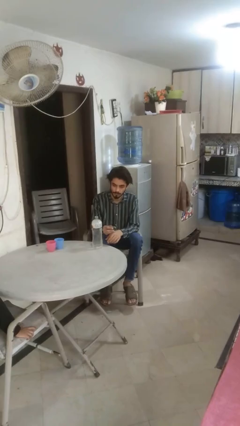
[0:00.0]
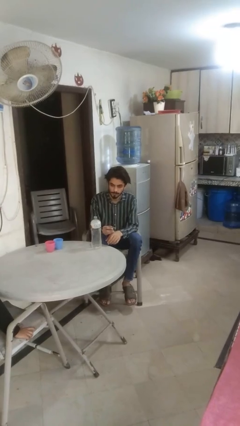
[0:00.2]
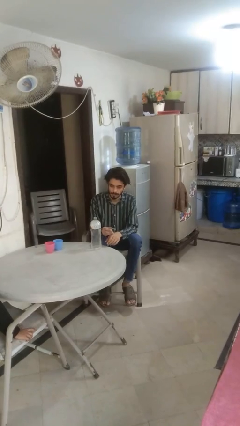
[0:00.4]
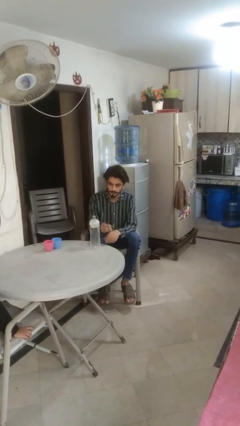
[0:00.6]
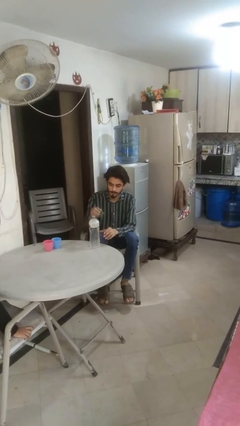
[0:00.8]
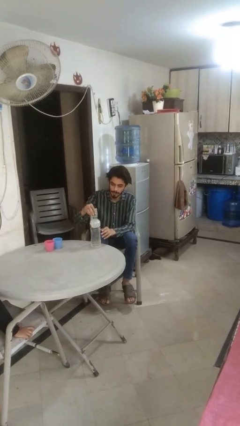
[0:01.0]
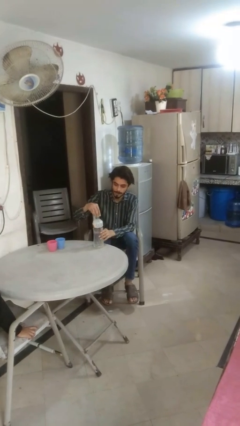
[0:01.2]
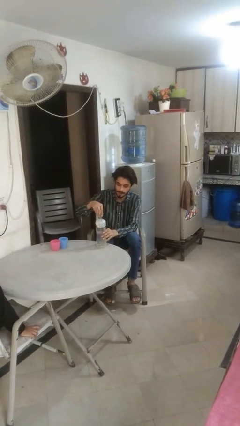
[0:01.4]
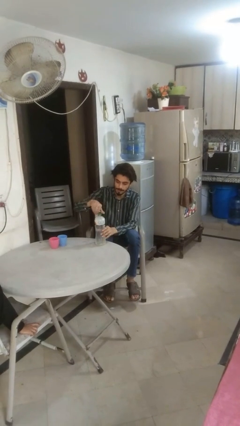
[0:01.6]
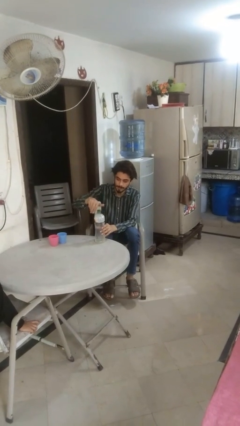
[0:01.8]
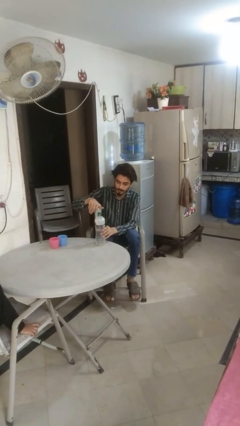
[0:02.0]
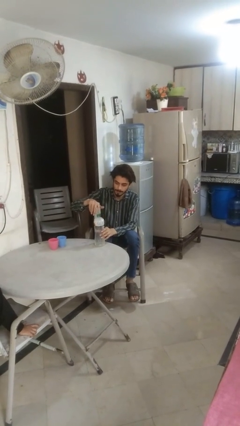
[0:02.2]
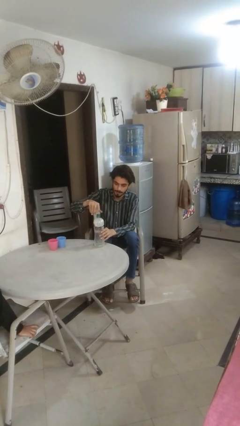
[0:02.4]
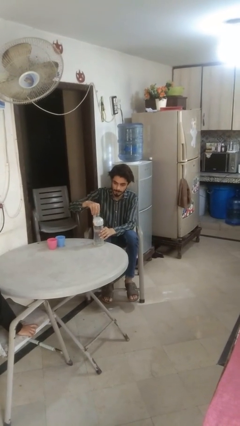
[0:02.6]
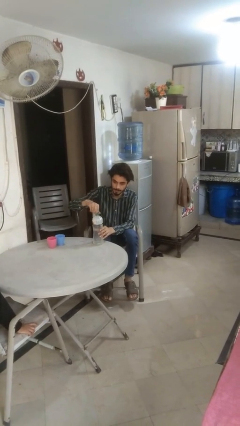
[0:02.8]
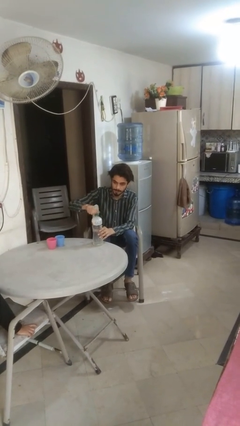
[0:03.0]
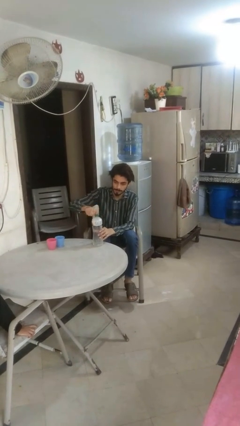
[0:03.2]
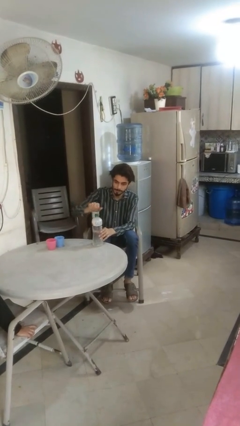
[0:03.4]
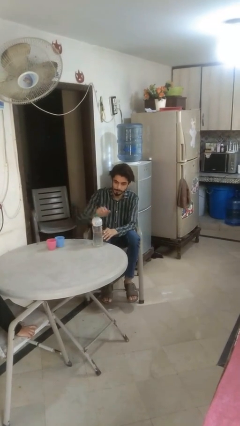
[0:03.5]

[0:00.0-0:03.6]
person screws lid to bottle

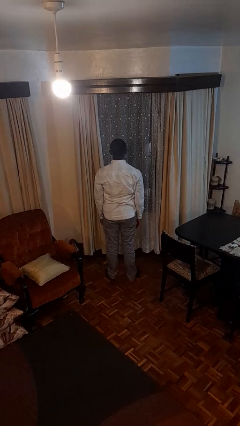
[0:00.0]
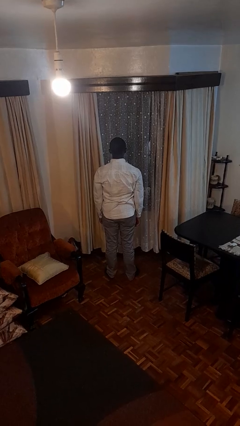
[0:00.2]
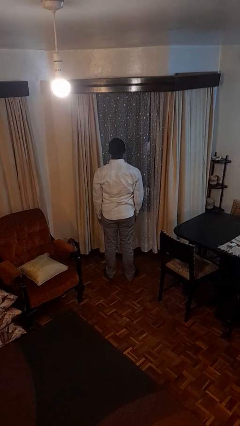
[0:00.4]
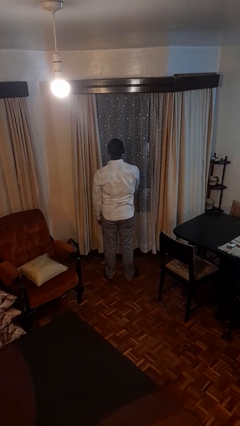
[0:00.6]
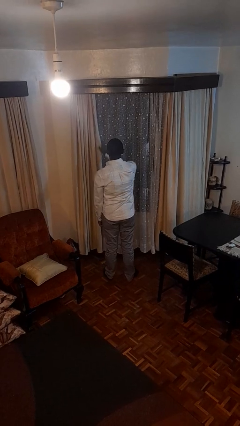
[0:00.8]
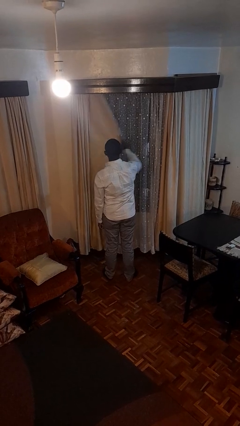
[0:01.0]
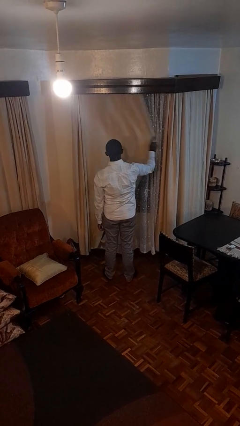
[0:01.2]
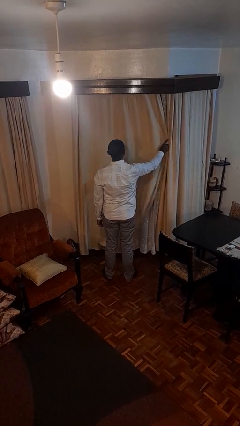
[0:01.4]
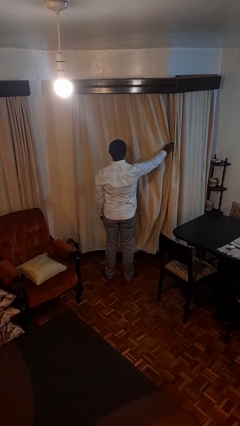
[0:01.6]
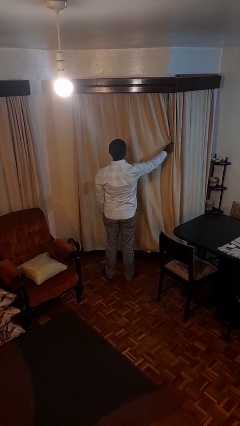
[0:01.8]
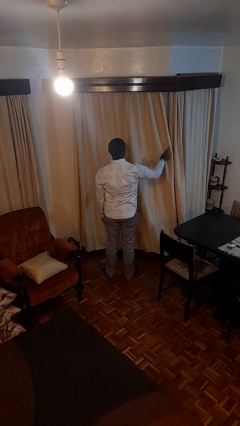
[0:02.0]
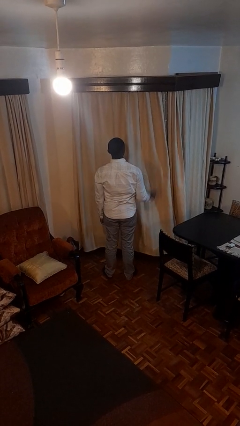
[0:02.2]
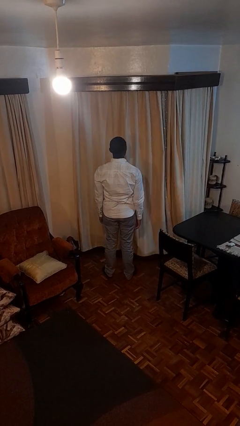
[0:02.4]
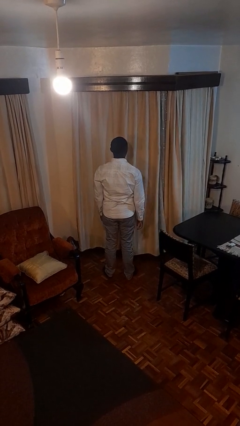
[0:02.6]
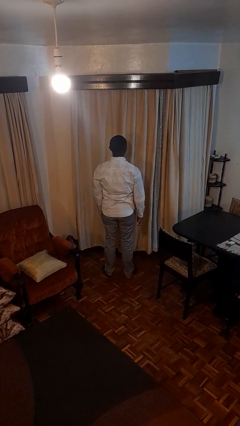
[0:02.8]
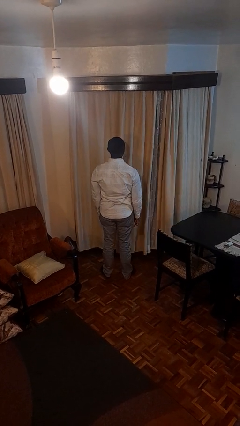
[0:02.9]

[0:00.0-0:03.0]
person closes curtains

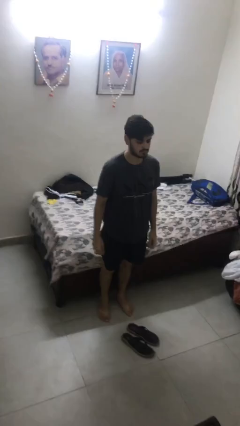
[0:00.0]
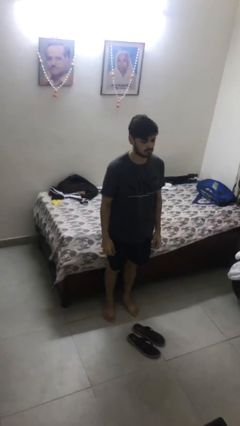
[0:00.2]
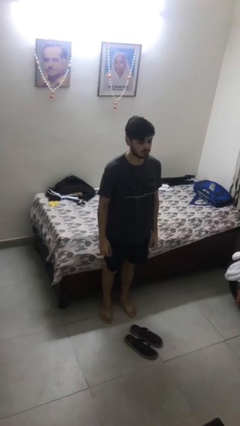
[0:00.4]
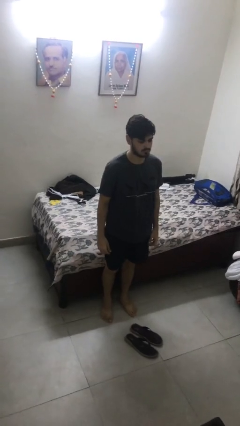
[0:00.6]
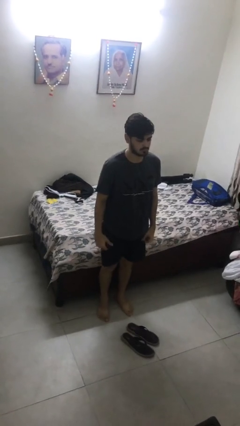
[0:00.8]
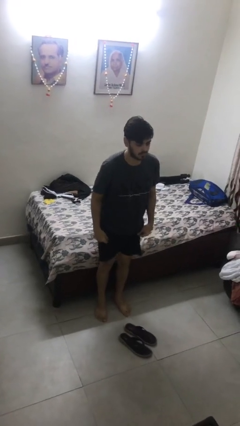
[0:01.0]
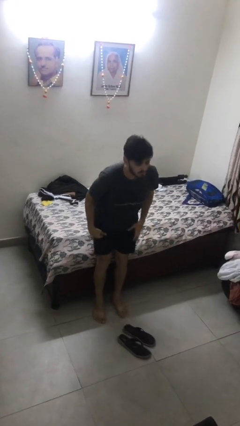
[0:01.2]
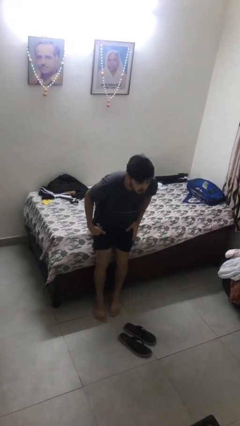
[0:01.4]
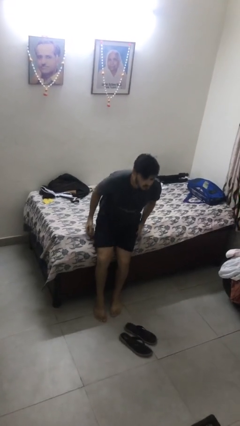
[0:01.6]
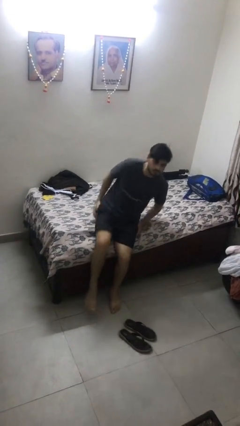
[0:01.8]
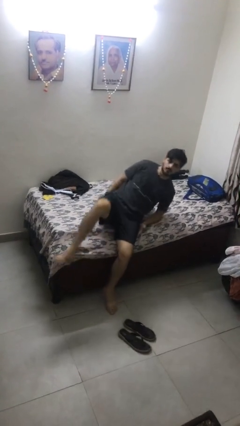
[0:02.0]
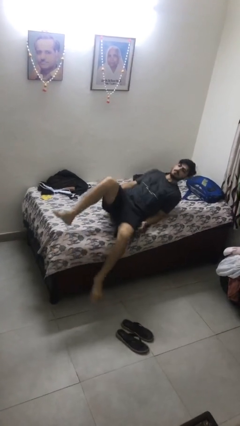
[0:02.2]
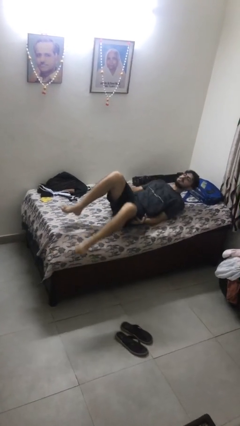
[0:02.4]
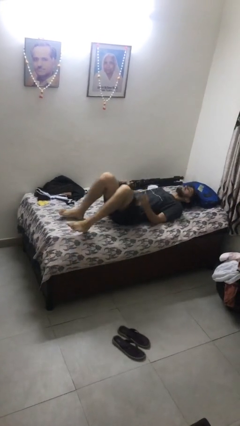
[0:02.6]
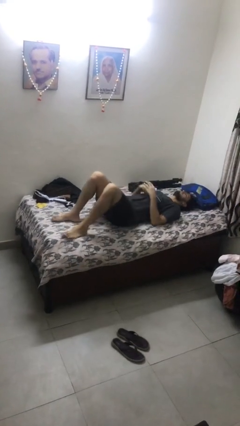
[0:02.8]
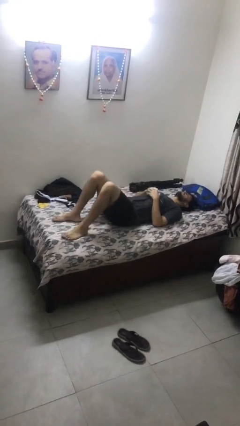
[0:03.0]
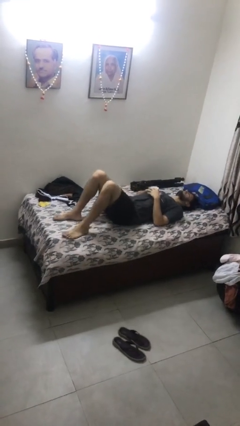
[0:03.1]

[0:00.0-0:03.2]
person lies down on bed

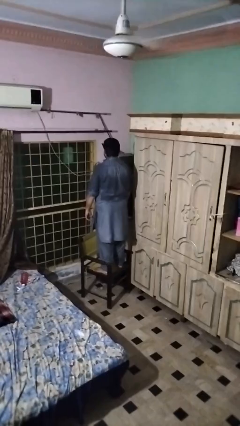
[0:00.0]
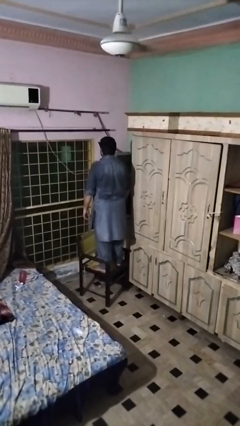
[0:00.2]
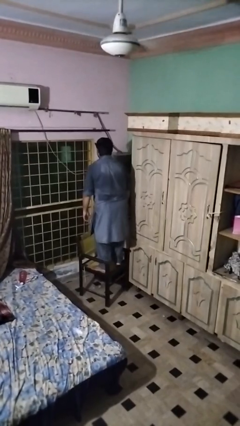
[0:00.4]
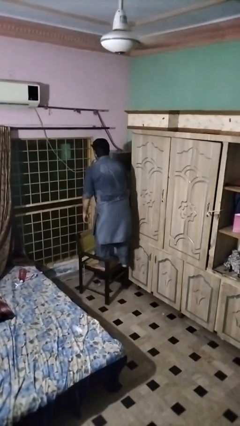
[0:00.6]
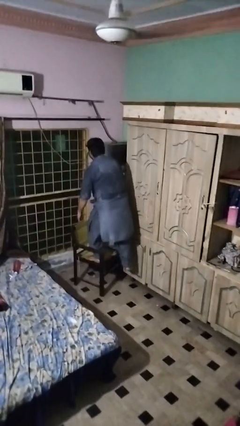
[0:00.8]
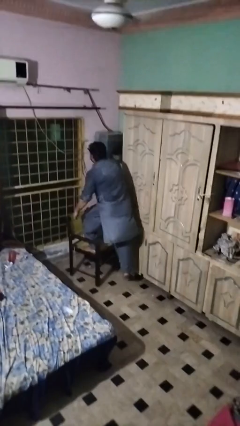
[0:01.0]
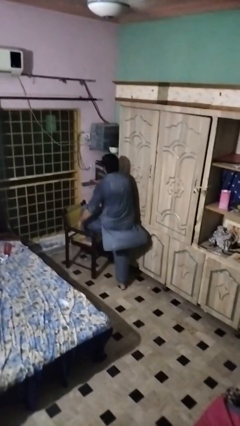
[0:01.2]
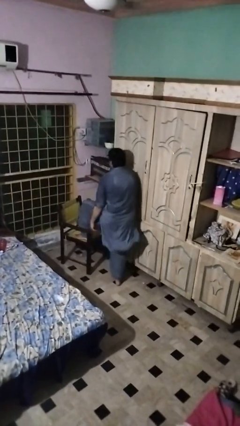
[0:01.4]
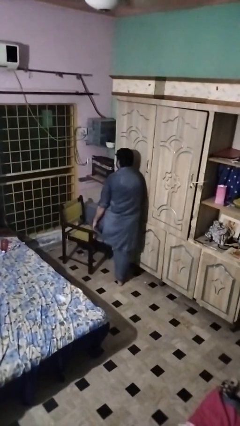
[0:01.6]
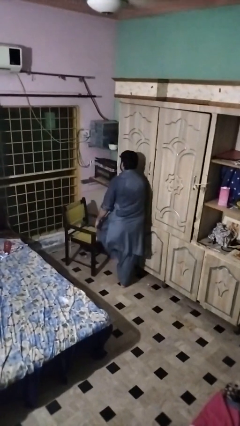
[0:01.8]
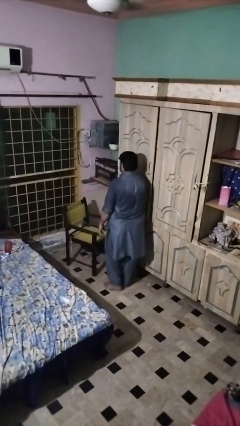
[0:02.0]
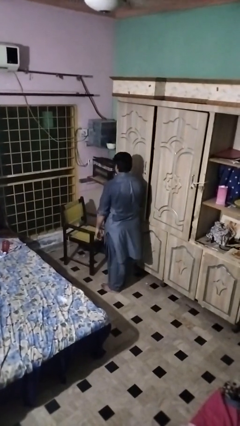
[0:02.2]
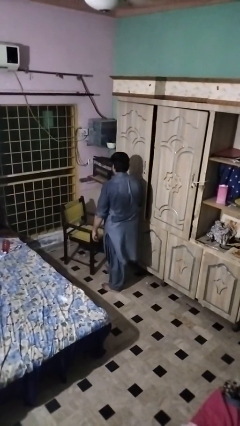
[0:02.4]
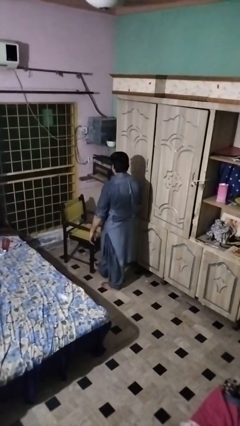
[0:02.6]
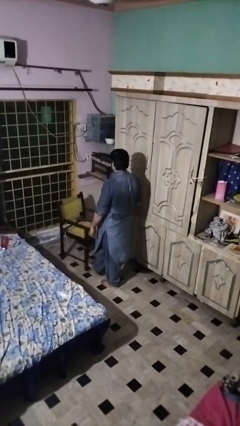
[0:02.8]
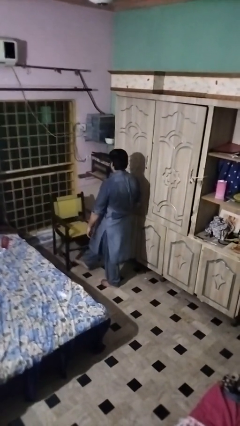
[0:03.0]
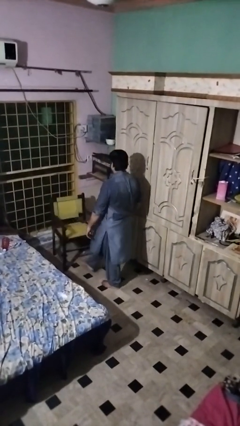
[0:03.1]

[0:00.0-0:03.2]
person climbs off chair

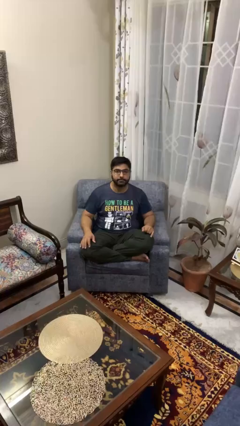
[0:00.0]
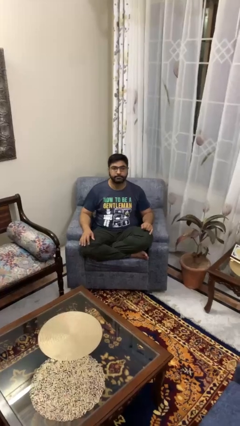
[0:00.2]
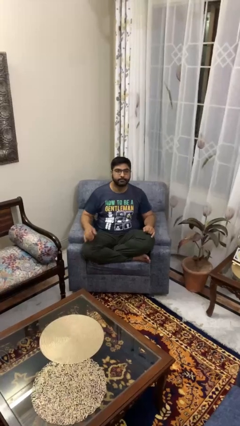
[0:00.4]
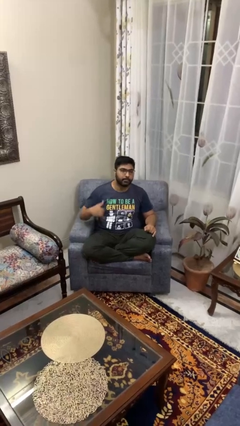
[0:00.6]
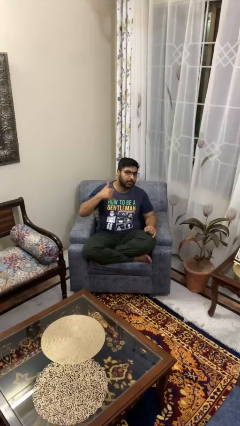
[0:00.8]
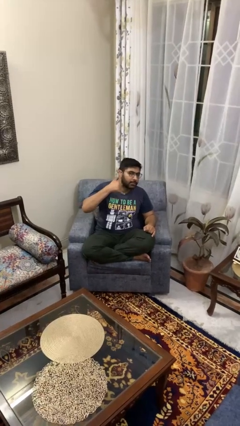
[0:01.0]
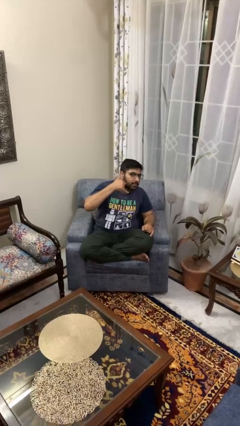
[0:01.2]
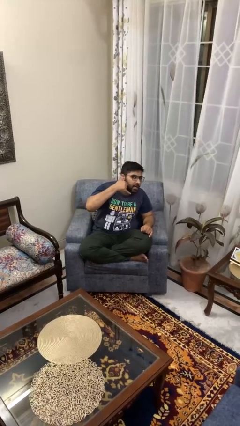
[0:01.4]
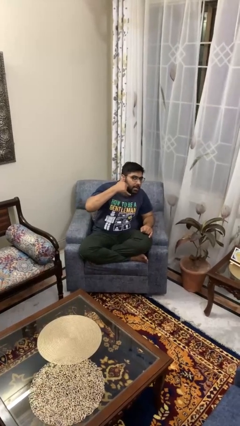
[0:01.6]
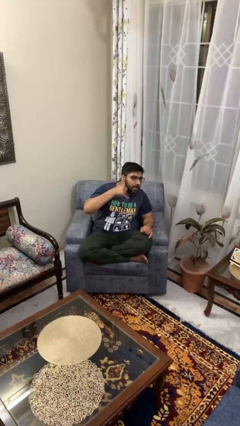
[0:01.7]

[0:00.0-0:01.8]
person gestures call me

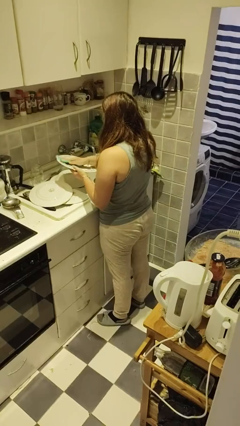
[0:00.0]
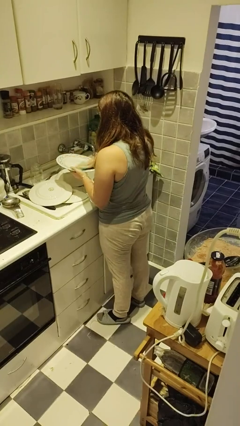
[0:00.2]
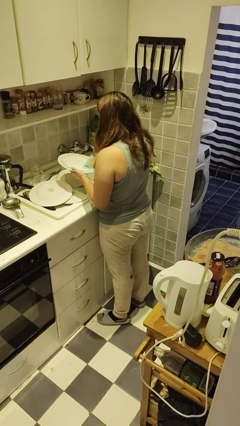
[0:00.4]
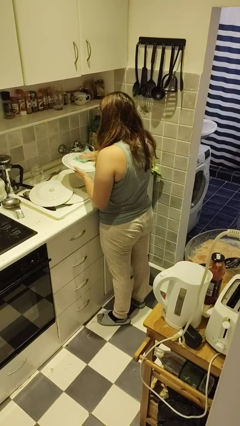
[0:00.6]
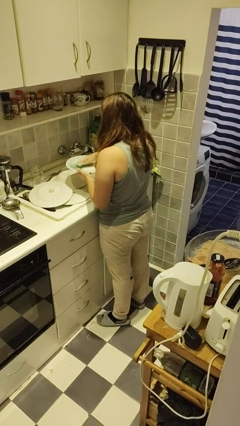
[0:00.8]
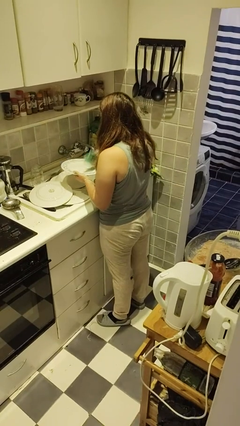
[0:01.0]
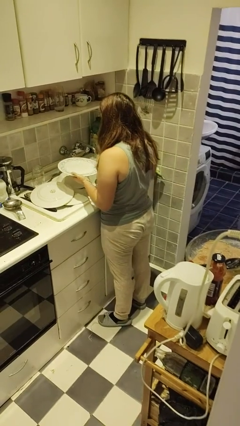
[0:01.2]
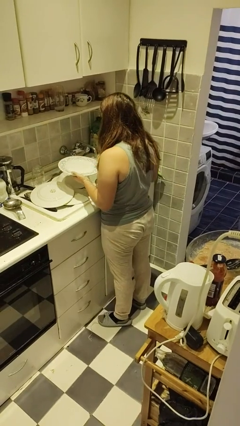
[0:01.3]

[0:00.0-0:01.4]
person dries dish

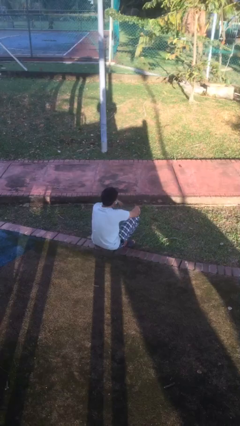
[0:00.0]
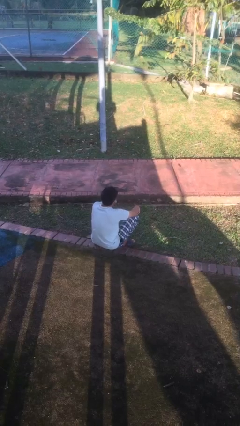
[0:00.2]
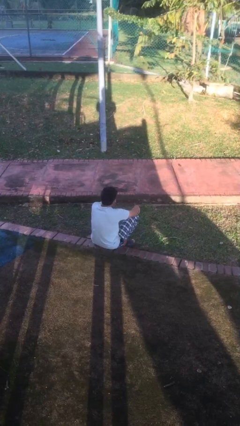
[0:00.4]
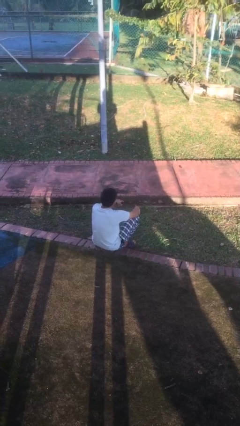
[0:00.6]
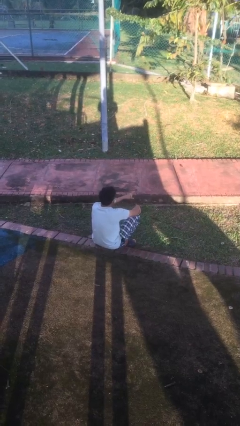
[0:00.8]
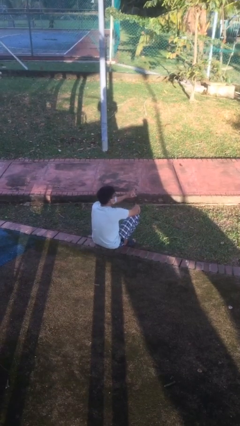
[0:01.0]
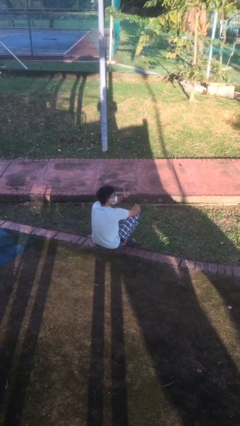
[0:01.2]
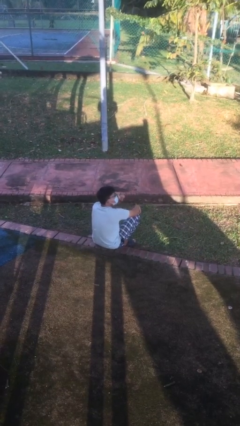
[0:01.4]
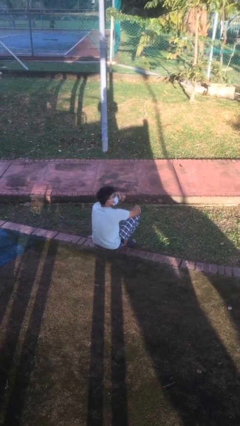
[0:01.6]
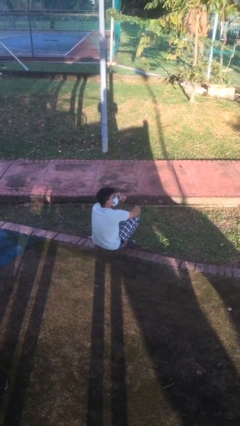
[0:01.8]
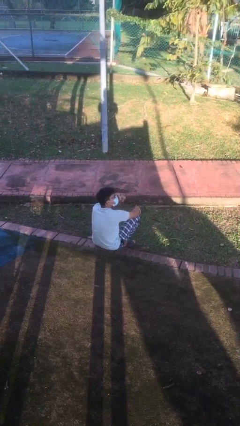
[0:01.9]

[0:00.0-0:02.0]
person gestures be quiet
